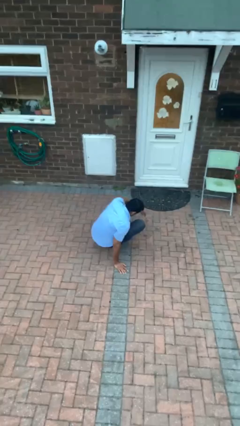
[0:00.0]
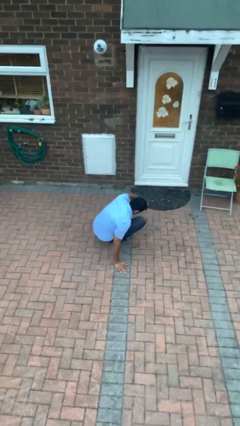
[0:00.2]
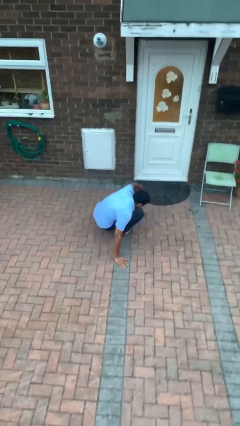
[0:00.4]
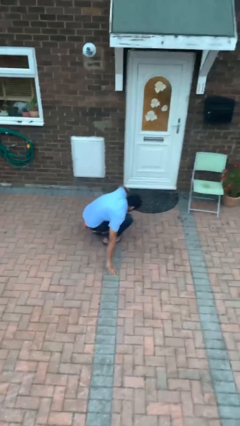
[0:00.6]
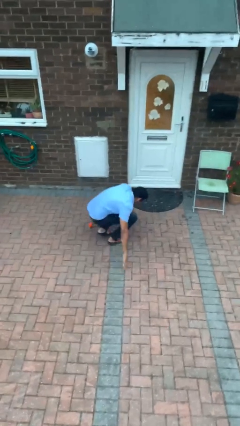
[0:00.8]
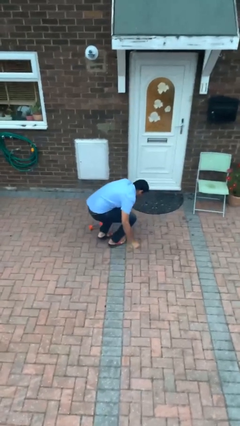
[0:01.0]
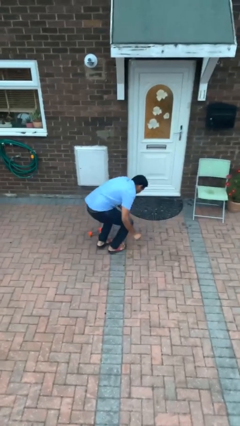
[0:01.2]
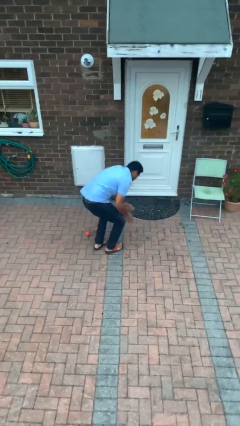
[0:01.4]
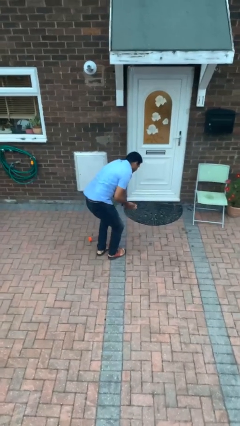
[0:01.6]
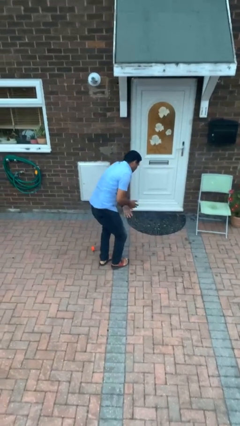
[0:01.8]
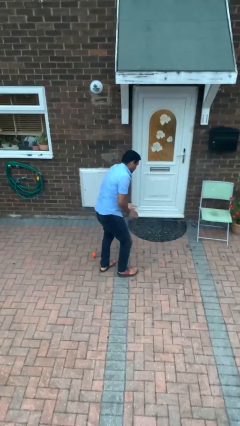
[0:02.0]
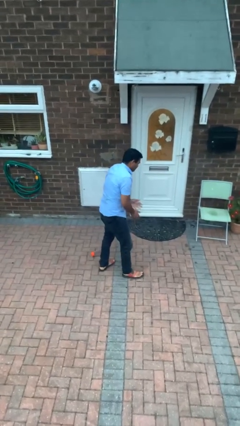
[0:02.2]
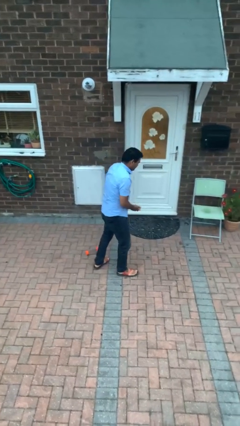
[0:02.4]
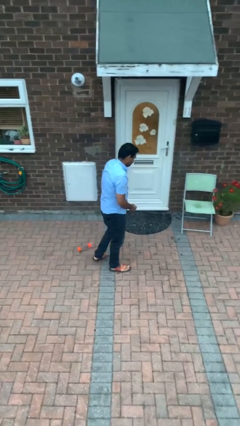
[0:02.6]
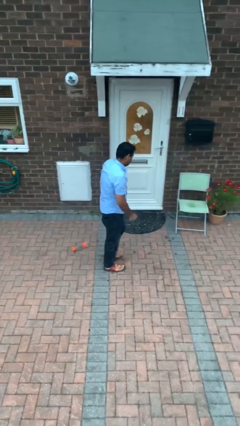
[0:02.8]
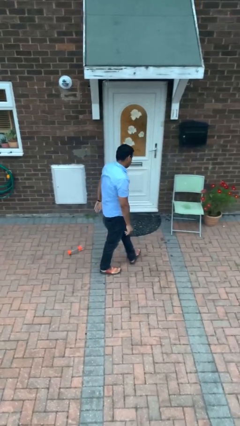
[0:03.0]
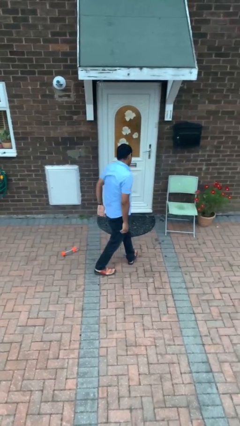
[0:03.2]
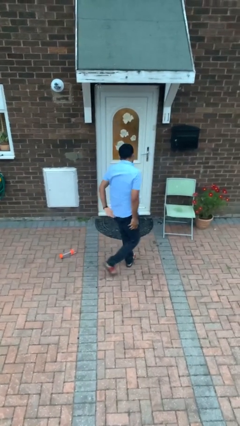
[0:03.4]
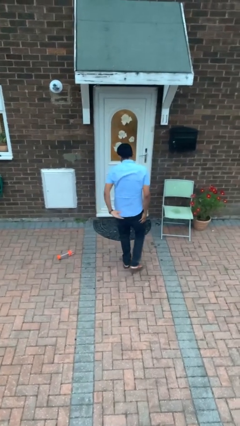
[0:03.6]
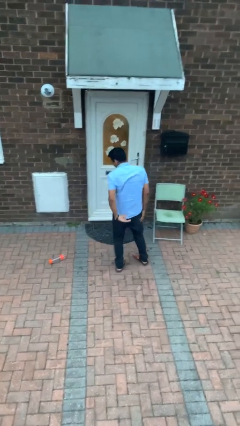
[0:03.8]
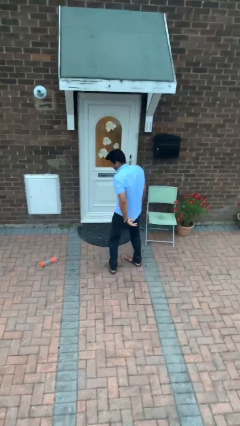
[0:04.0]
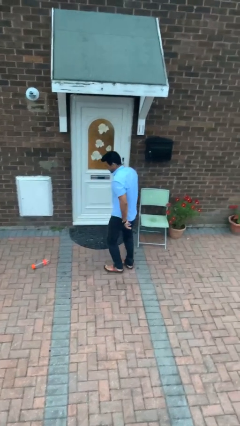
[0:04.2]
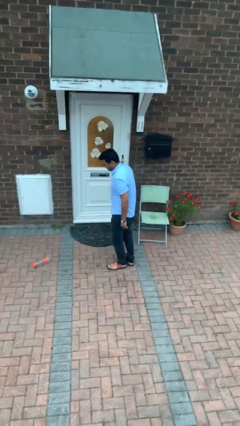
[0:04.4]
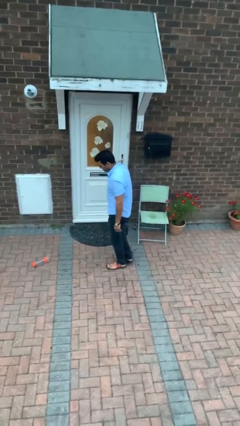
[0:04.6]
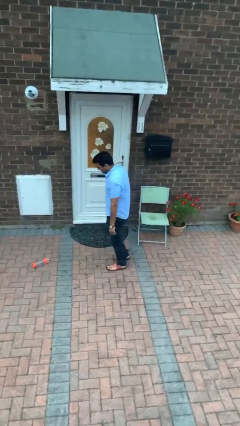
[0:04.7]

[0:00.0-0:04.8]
person stands up from floor

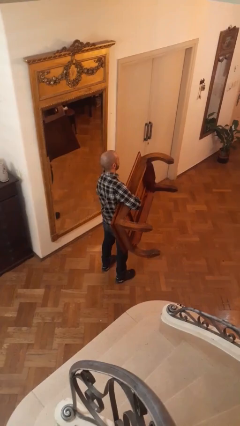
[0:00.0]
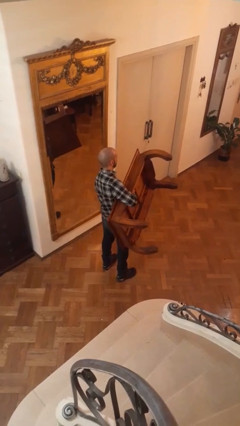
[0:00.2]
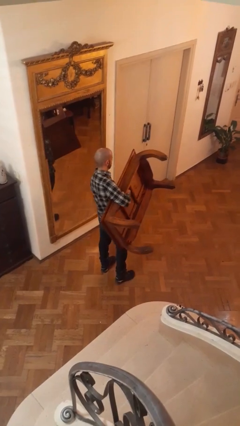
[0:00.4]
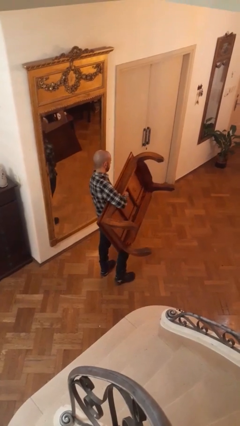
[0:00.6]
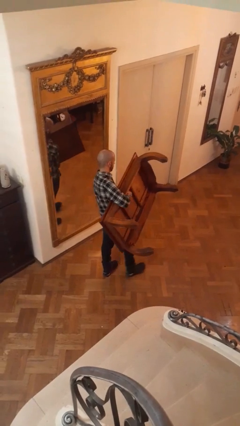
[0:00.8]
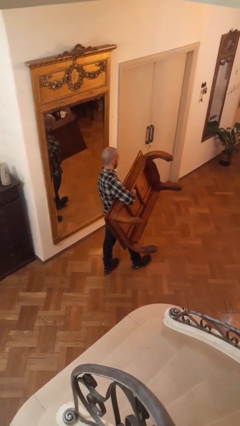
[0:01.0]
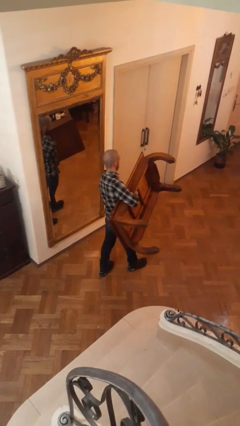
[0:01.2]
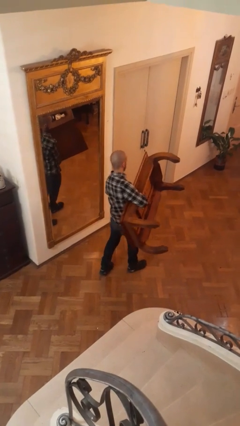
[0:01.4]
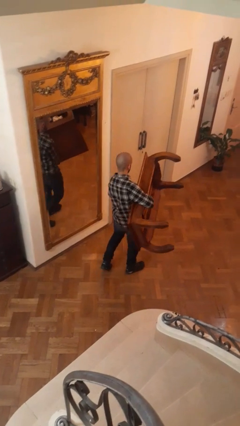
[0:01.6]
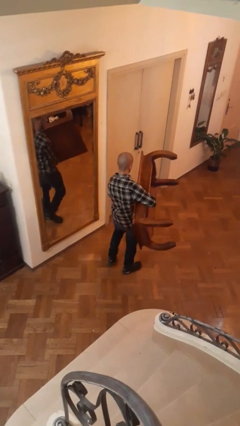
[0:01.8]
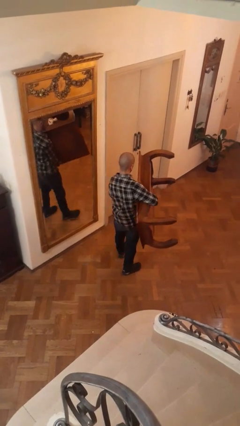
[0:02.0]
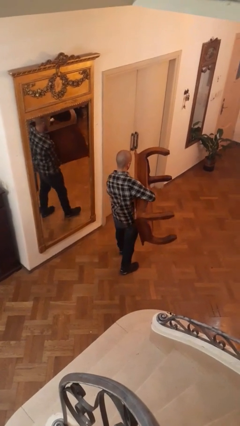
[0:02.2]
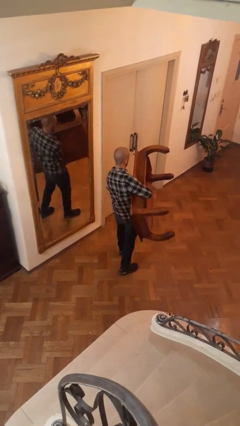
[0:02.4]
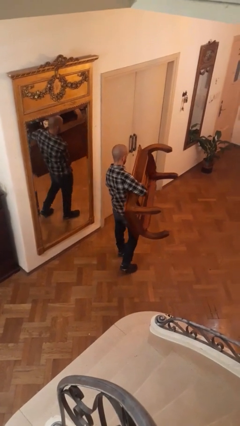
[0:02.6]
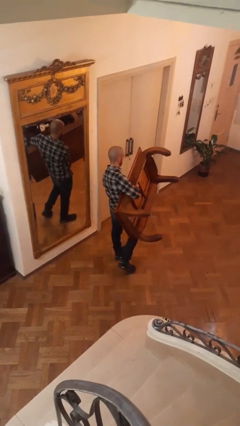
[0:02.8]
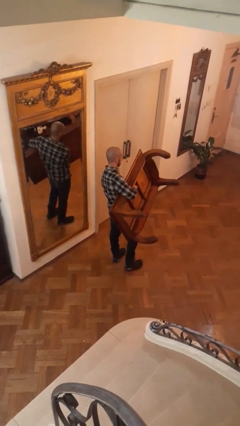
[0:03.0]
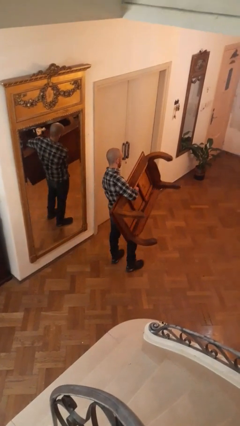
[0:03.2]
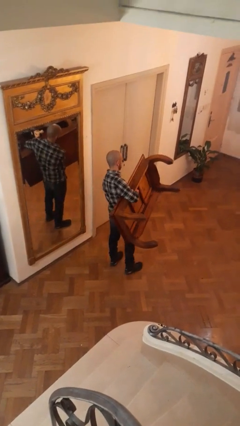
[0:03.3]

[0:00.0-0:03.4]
person carries furniture

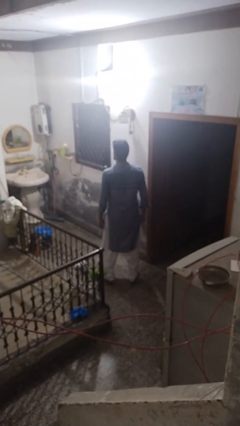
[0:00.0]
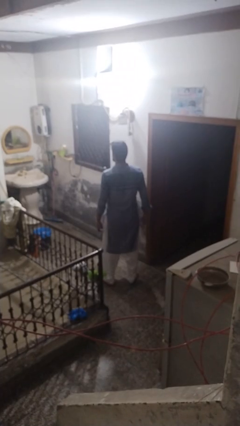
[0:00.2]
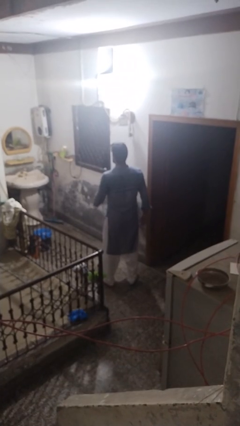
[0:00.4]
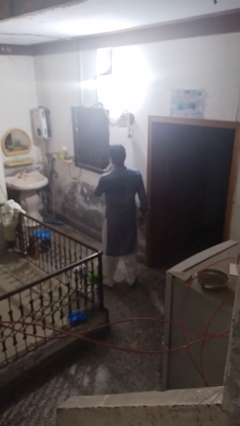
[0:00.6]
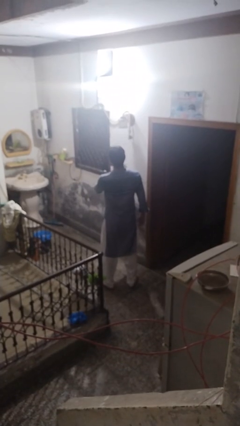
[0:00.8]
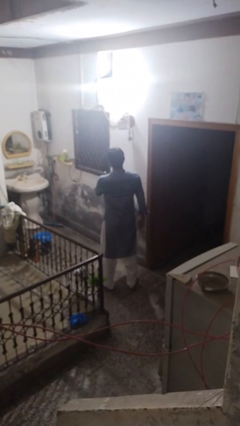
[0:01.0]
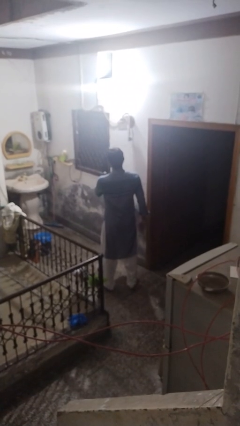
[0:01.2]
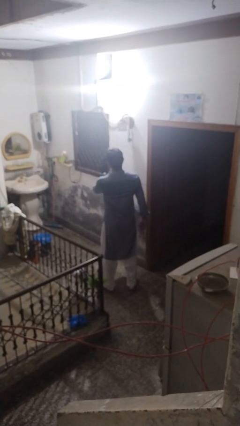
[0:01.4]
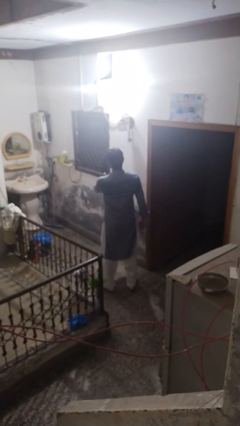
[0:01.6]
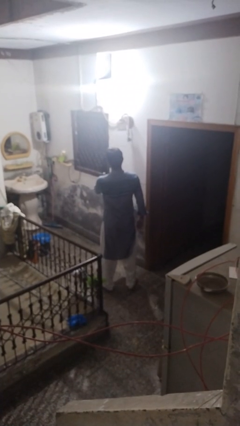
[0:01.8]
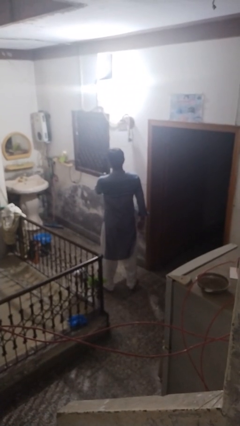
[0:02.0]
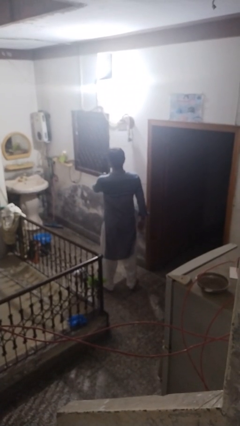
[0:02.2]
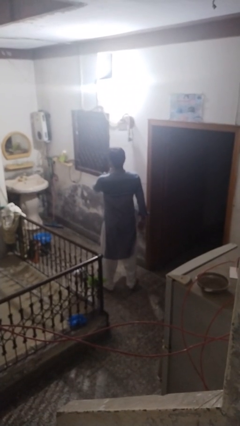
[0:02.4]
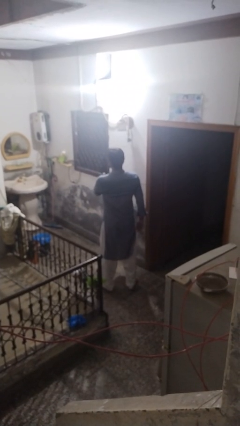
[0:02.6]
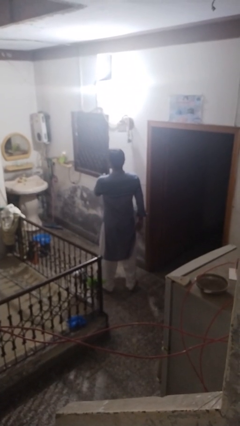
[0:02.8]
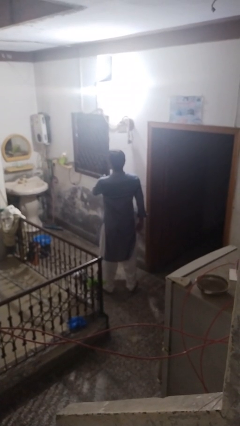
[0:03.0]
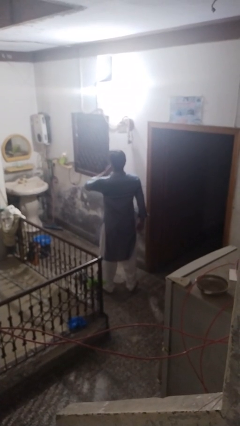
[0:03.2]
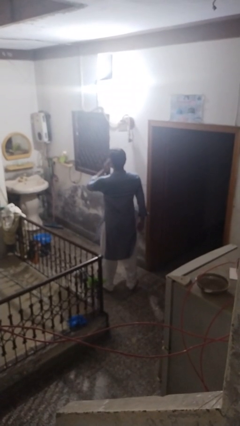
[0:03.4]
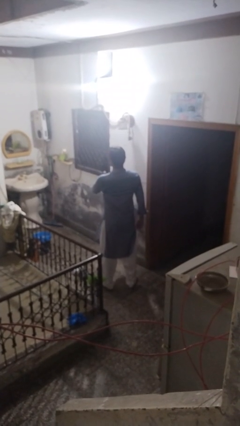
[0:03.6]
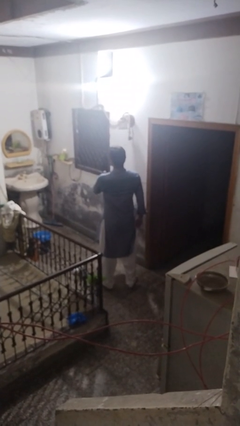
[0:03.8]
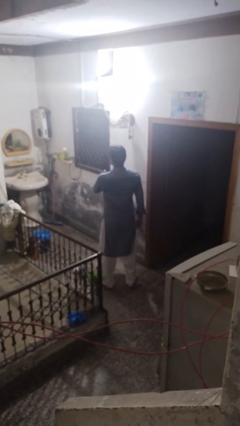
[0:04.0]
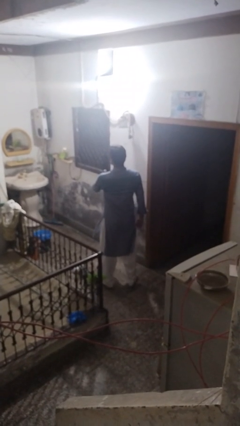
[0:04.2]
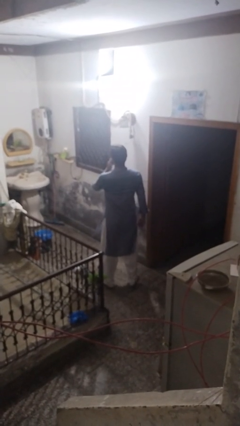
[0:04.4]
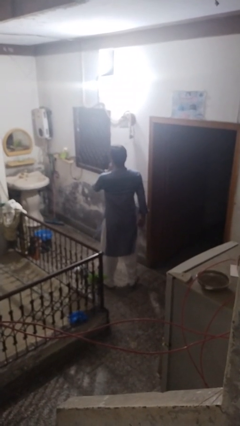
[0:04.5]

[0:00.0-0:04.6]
person drums on chest

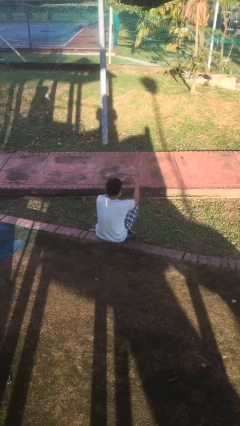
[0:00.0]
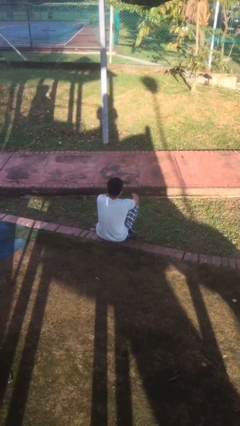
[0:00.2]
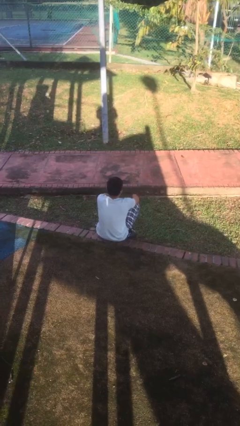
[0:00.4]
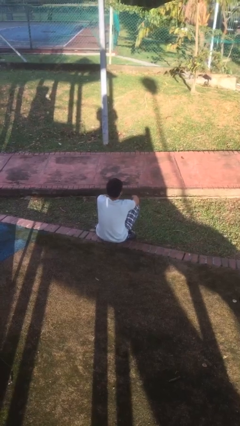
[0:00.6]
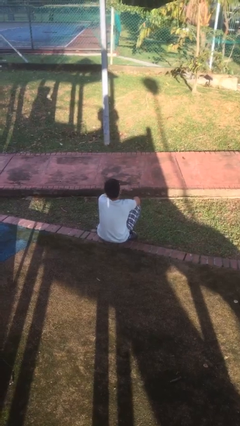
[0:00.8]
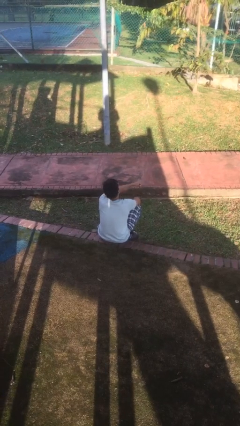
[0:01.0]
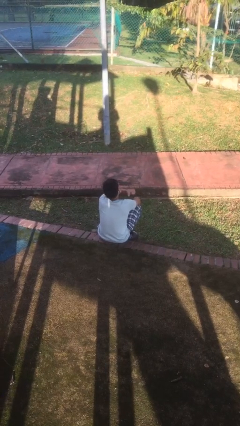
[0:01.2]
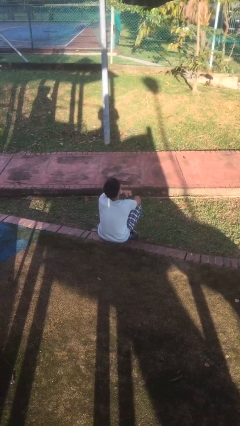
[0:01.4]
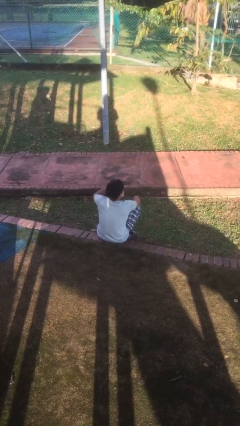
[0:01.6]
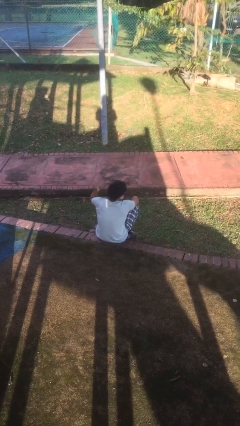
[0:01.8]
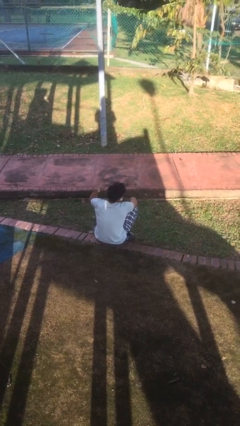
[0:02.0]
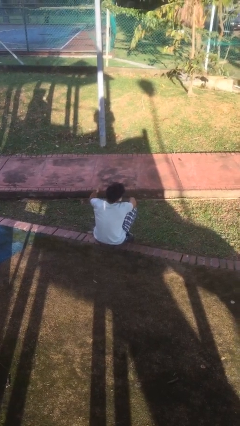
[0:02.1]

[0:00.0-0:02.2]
person gestures cut

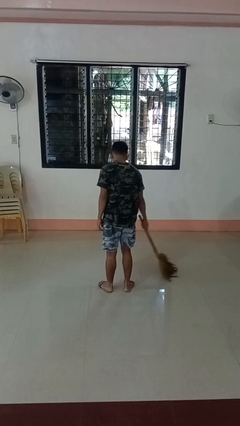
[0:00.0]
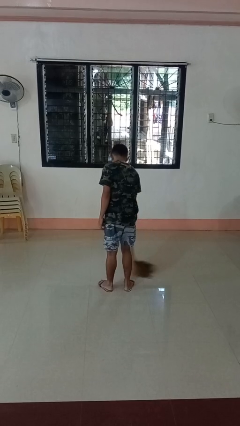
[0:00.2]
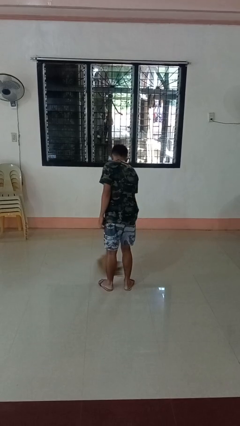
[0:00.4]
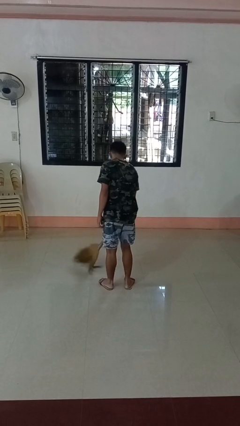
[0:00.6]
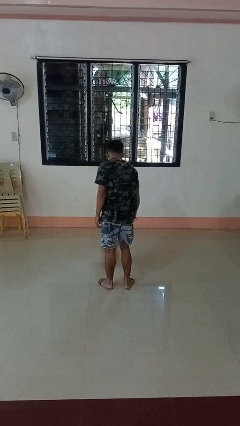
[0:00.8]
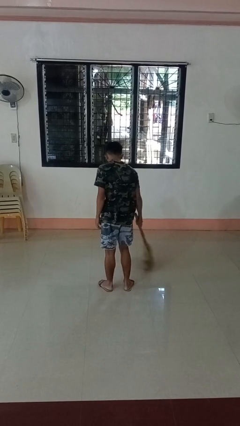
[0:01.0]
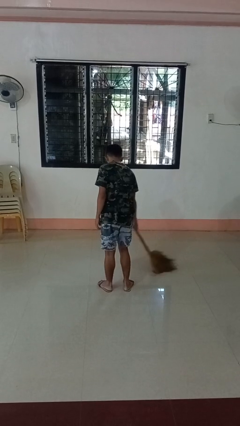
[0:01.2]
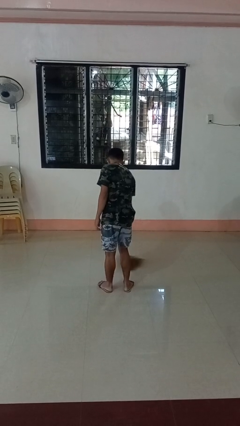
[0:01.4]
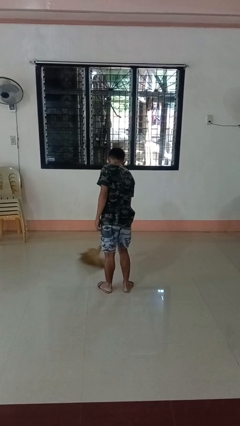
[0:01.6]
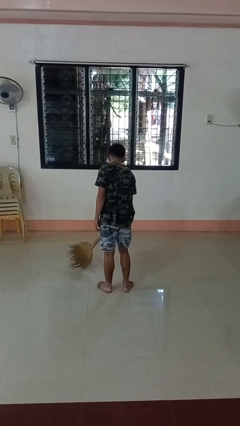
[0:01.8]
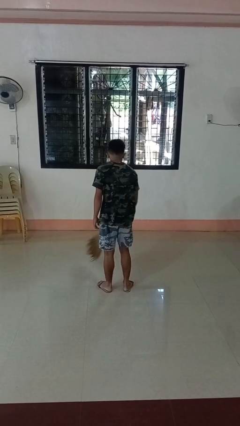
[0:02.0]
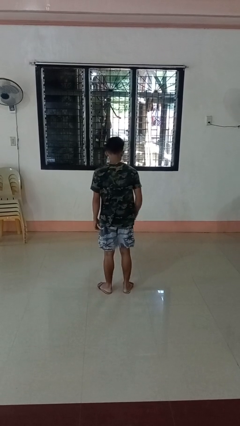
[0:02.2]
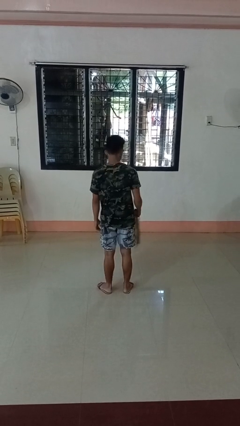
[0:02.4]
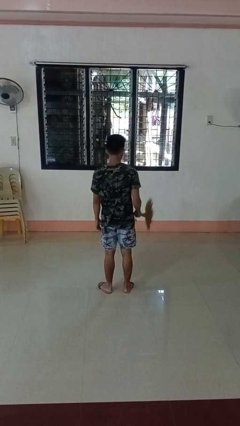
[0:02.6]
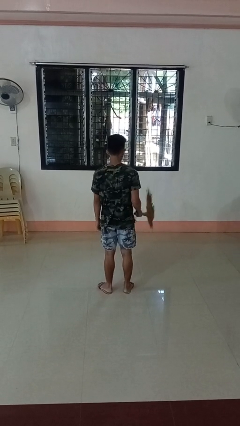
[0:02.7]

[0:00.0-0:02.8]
person sweeps floor
